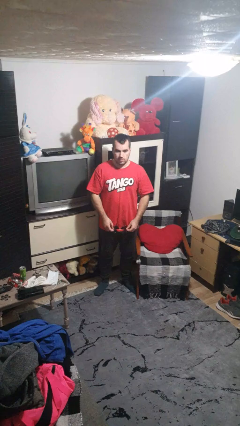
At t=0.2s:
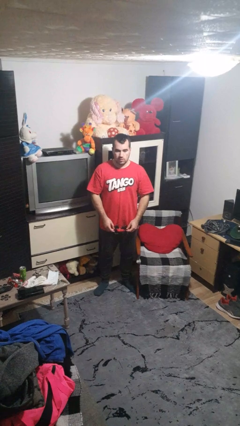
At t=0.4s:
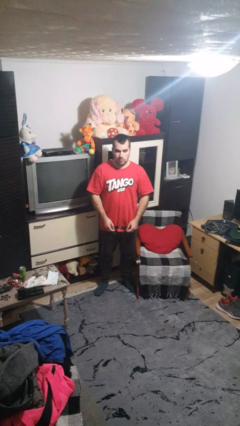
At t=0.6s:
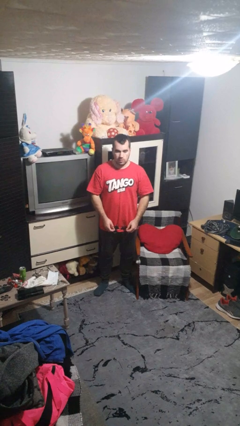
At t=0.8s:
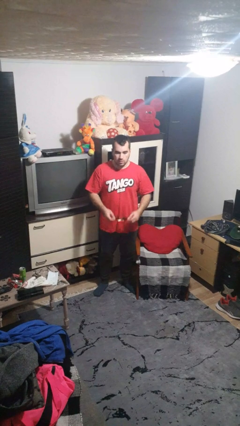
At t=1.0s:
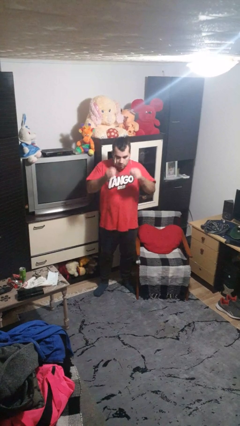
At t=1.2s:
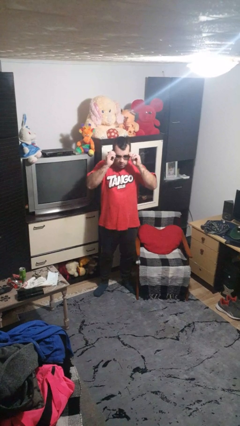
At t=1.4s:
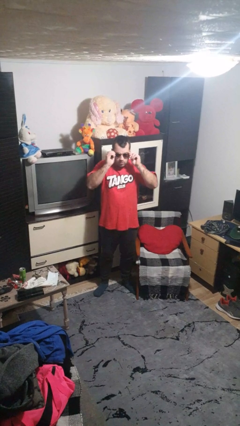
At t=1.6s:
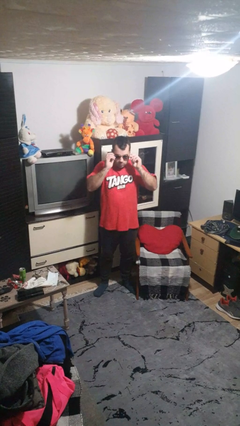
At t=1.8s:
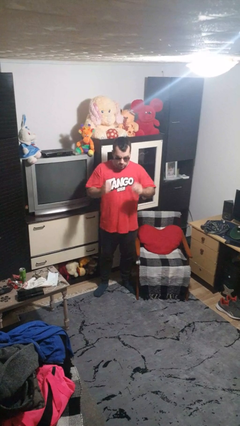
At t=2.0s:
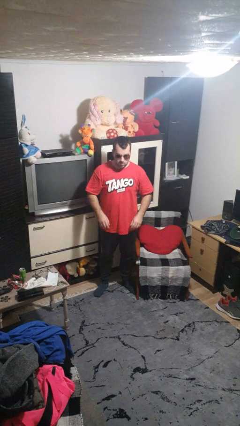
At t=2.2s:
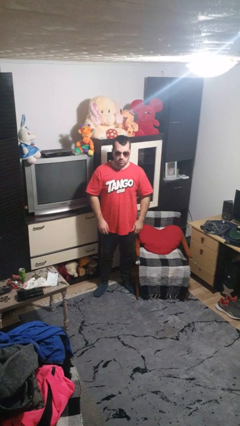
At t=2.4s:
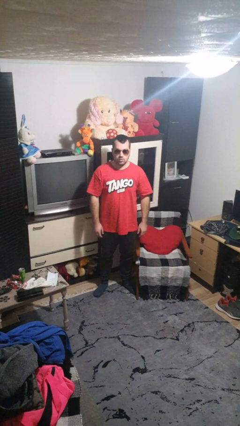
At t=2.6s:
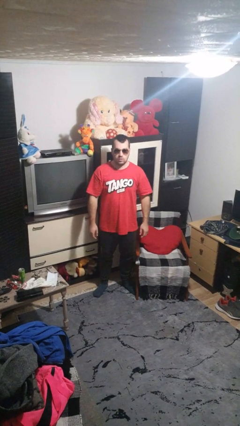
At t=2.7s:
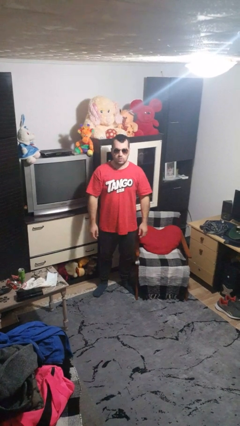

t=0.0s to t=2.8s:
person puts on sunglasses

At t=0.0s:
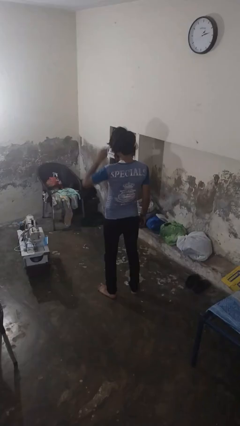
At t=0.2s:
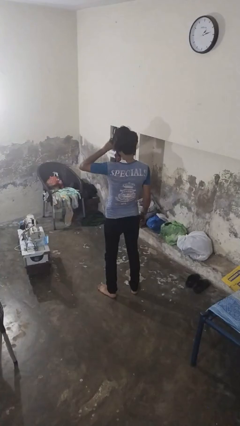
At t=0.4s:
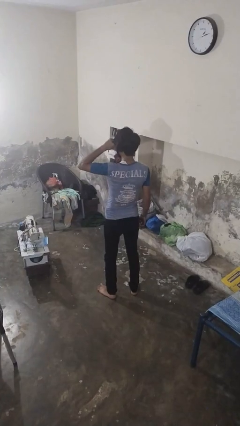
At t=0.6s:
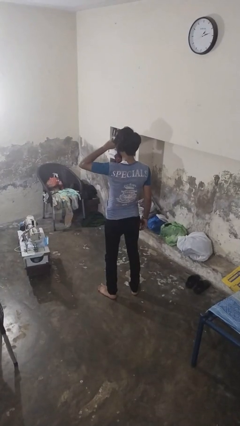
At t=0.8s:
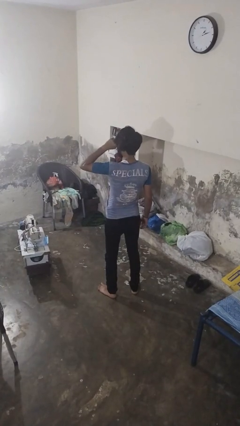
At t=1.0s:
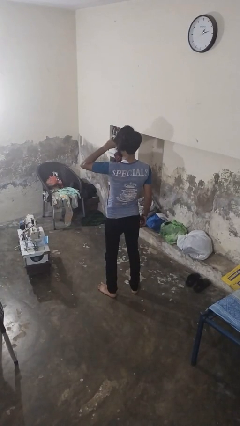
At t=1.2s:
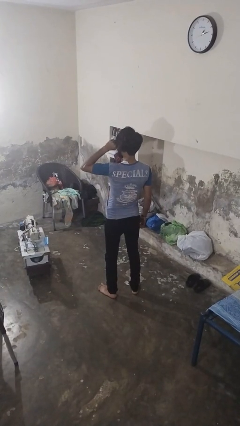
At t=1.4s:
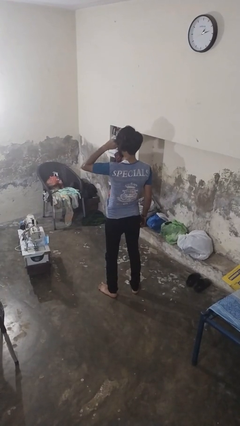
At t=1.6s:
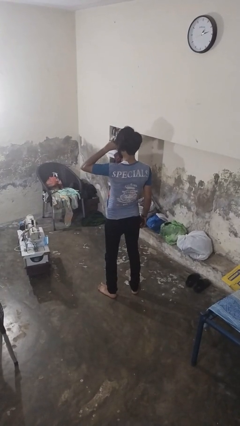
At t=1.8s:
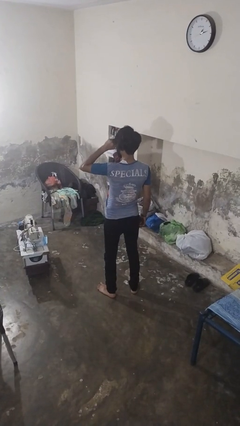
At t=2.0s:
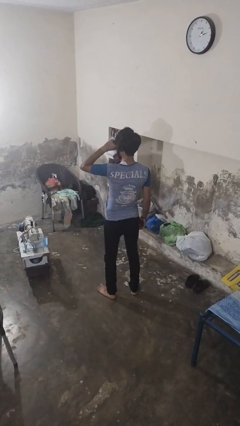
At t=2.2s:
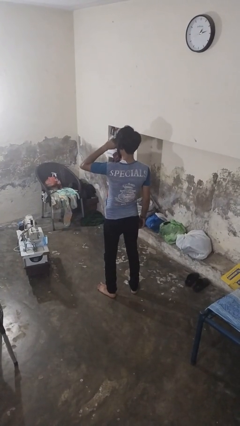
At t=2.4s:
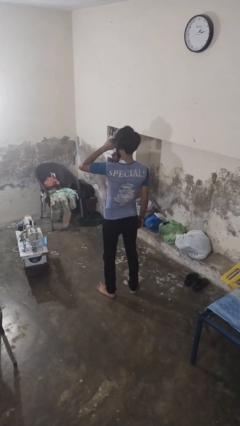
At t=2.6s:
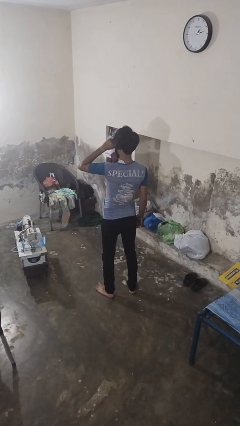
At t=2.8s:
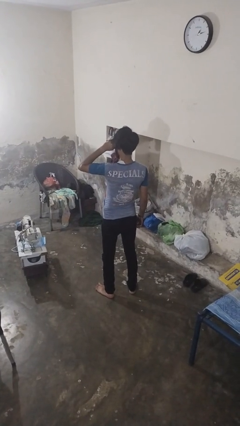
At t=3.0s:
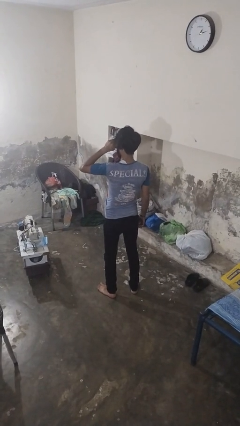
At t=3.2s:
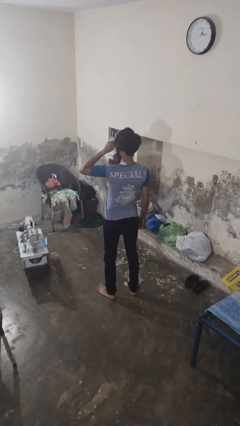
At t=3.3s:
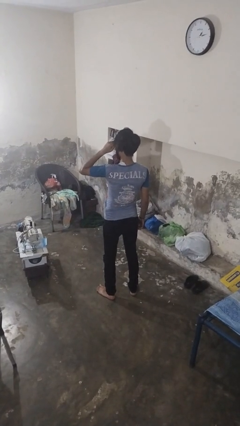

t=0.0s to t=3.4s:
person rubs eyes

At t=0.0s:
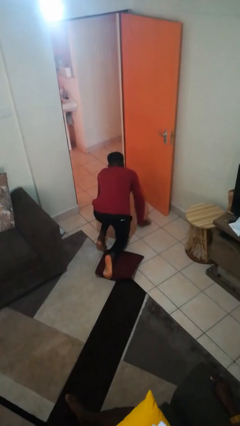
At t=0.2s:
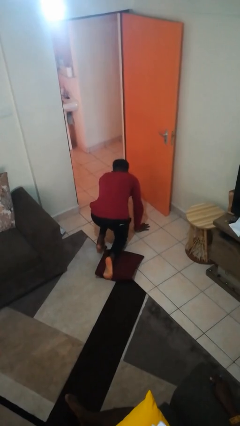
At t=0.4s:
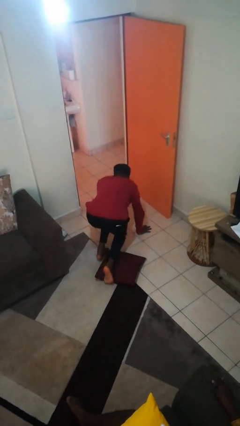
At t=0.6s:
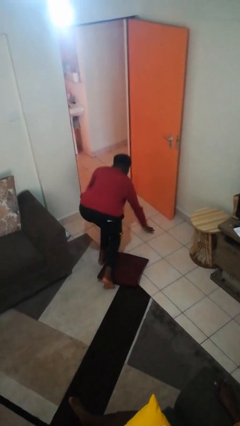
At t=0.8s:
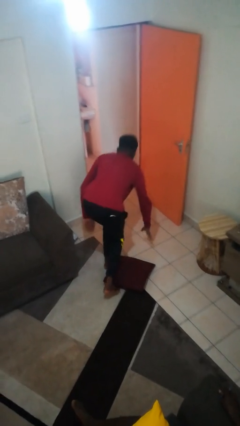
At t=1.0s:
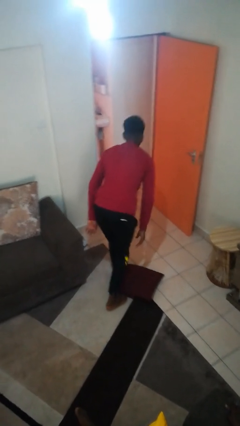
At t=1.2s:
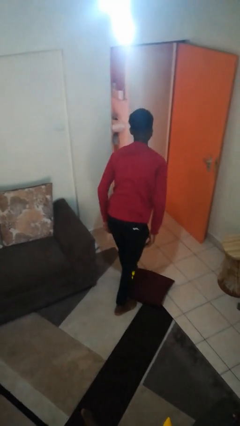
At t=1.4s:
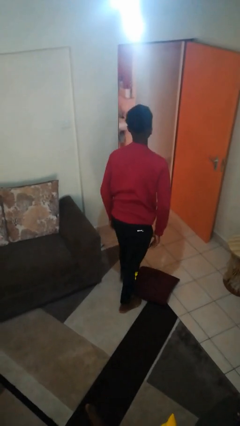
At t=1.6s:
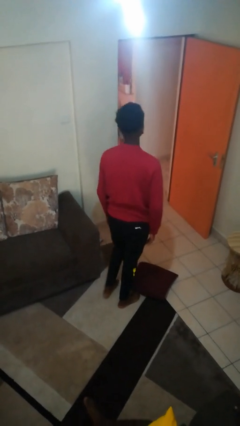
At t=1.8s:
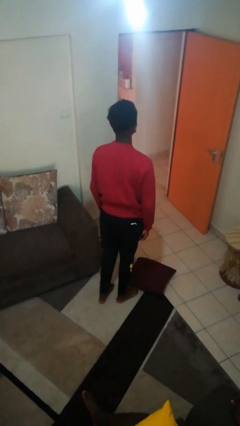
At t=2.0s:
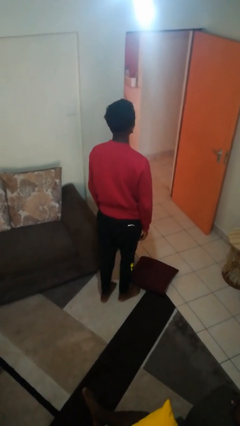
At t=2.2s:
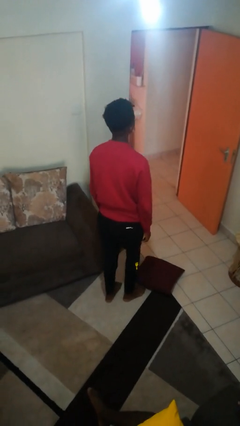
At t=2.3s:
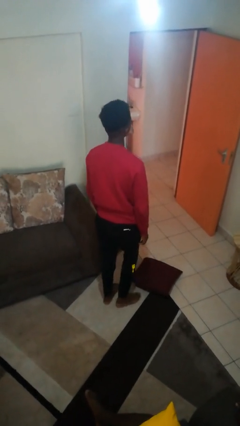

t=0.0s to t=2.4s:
person stands up from floor

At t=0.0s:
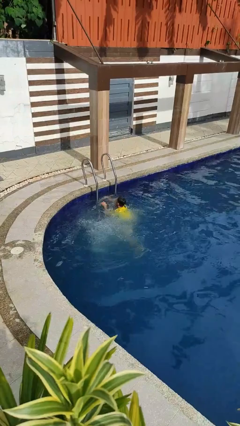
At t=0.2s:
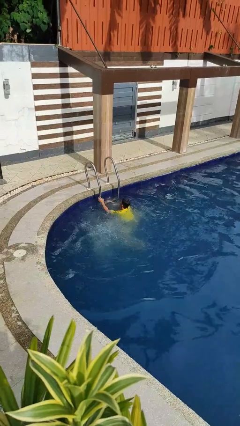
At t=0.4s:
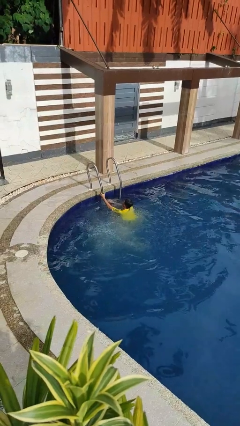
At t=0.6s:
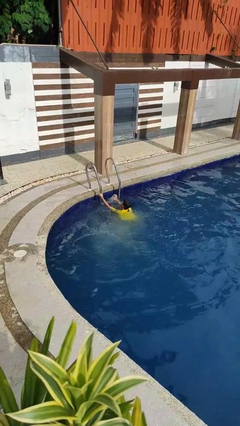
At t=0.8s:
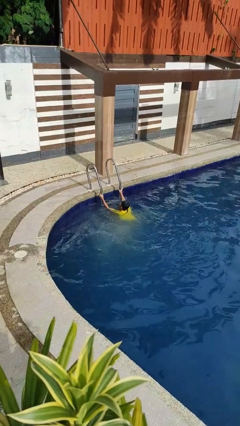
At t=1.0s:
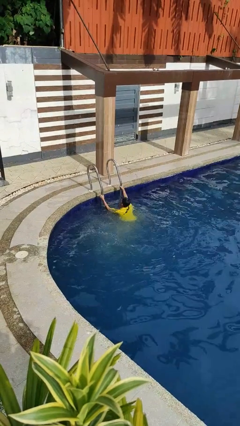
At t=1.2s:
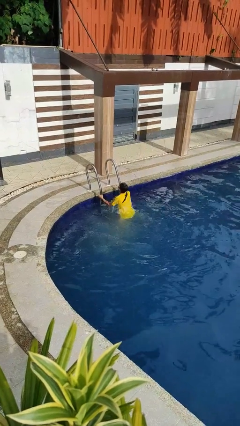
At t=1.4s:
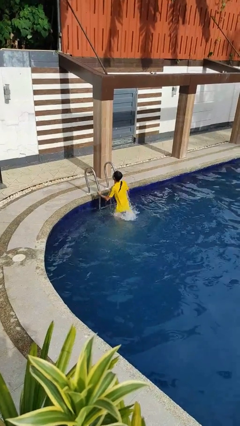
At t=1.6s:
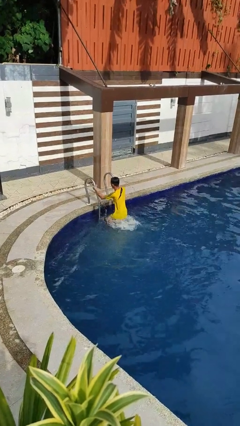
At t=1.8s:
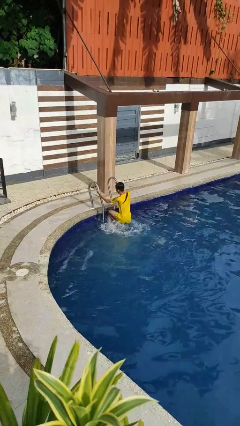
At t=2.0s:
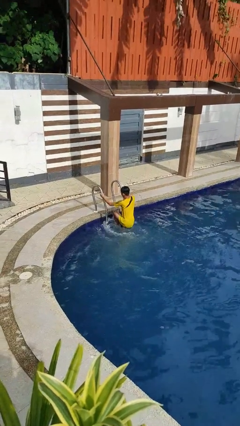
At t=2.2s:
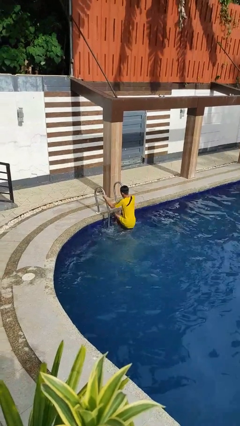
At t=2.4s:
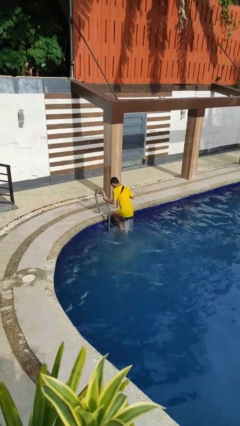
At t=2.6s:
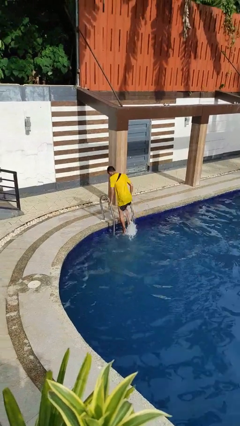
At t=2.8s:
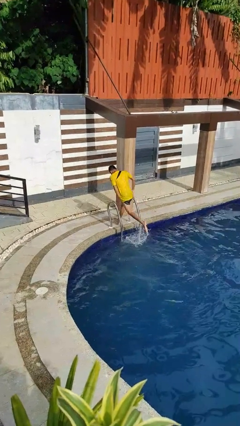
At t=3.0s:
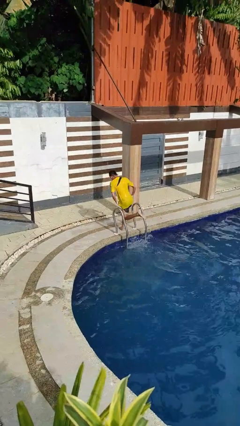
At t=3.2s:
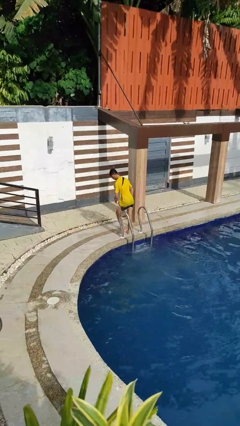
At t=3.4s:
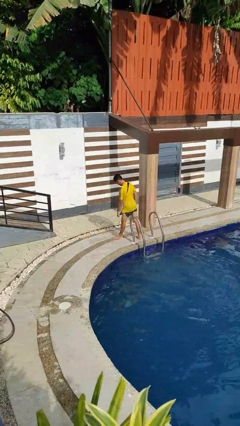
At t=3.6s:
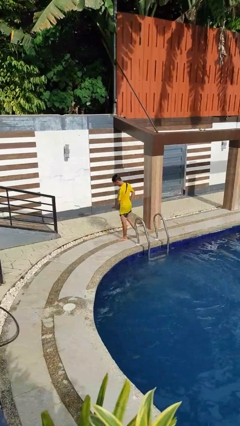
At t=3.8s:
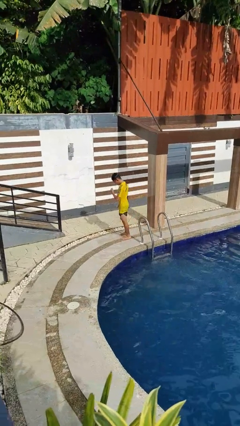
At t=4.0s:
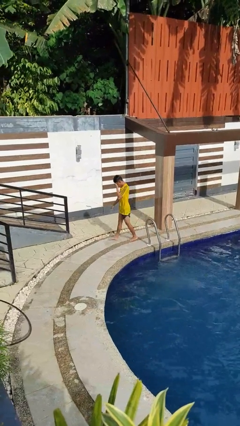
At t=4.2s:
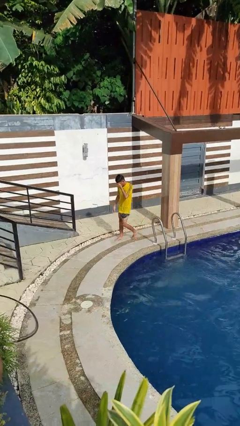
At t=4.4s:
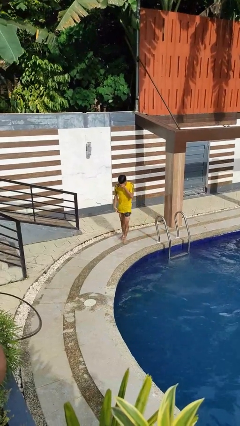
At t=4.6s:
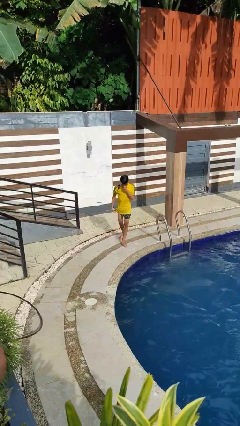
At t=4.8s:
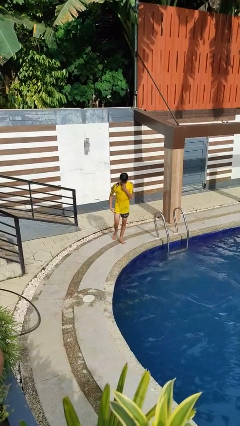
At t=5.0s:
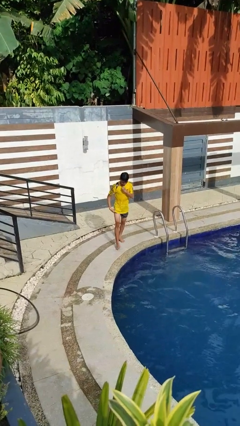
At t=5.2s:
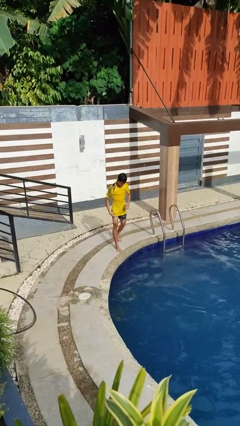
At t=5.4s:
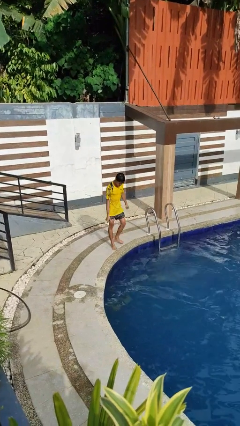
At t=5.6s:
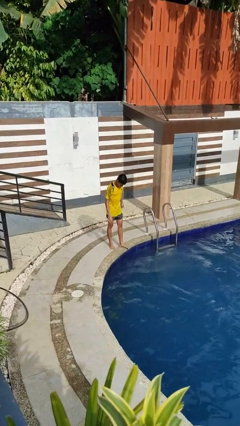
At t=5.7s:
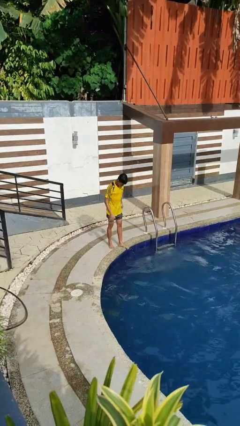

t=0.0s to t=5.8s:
person exits pool

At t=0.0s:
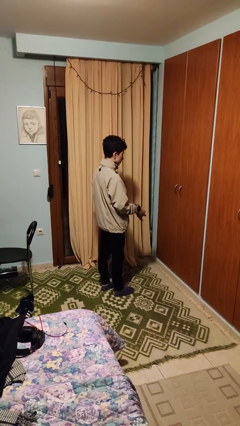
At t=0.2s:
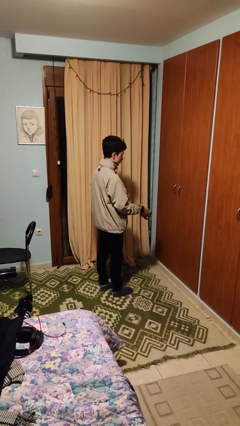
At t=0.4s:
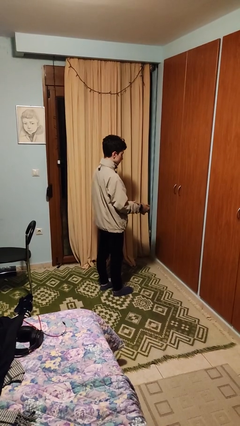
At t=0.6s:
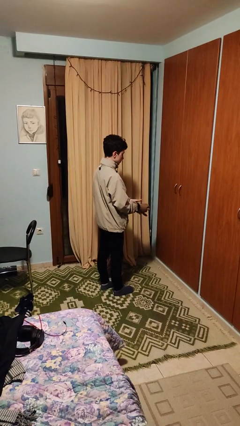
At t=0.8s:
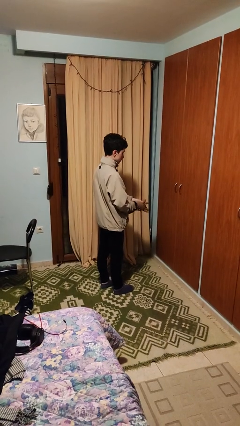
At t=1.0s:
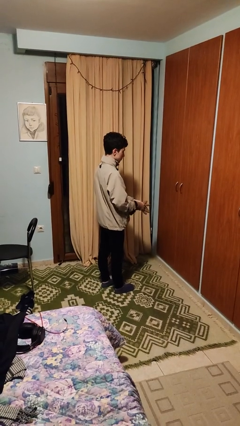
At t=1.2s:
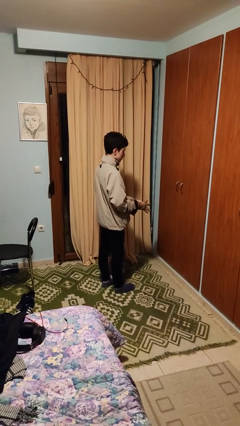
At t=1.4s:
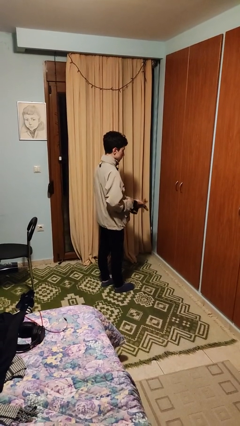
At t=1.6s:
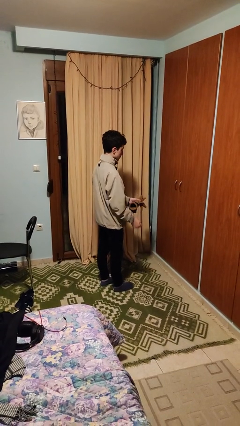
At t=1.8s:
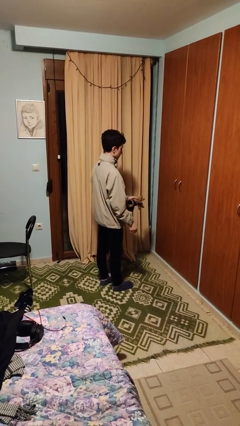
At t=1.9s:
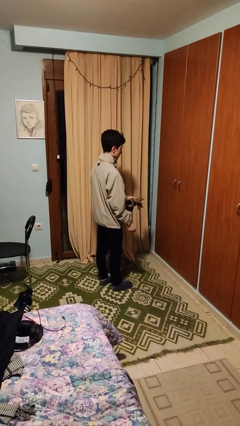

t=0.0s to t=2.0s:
person takes off gloves

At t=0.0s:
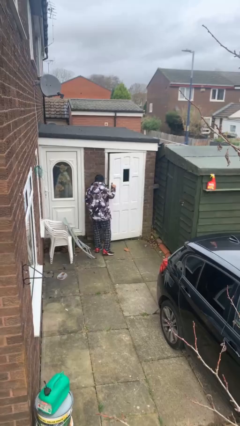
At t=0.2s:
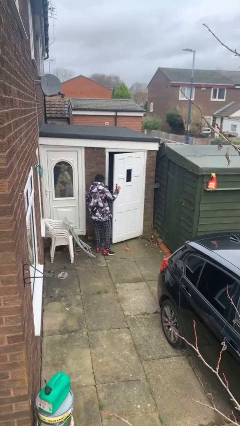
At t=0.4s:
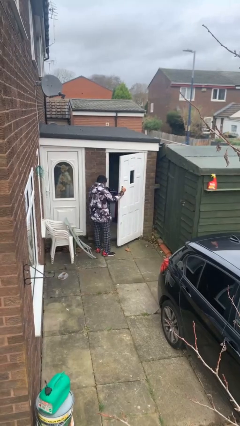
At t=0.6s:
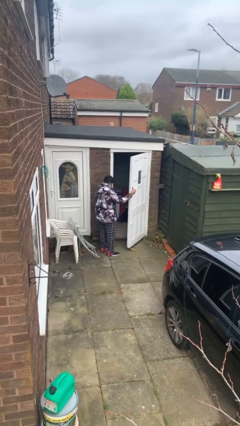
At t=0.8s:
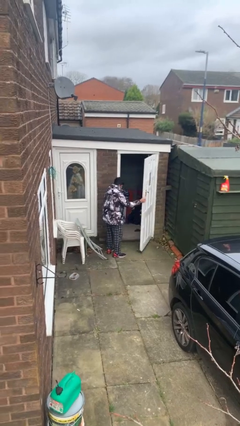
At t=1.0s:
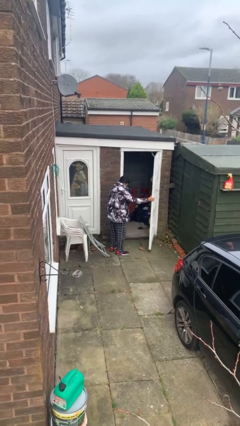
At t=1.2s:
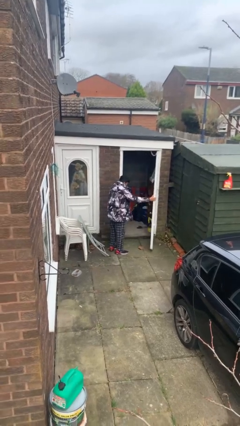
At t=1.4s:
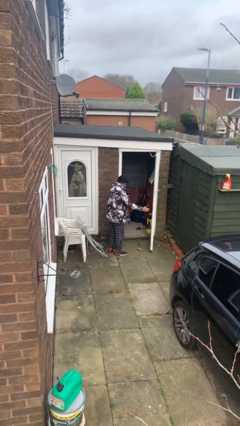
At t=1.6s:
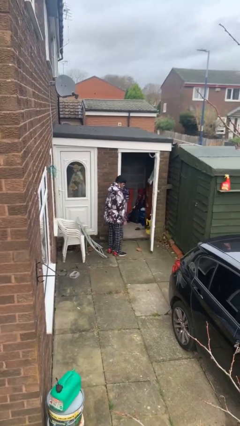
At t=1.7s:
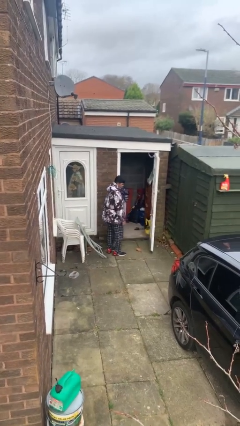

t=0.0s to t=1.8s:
person opens facility door
